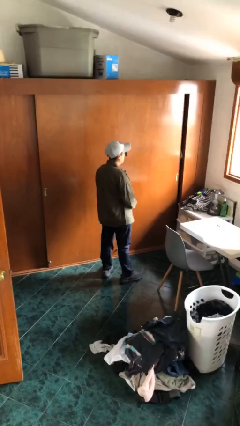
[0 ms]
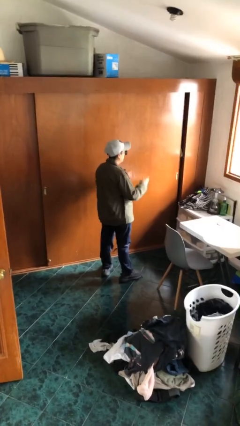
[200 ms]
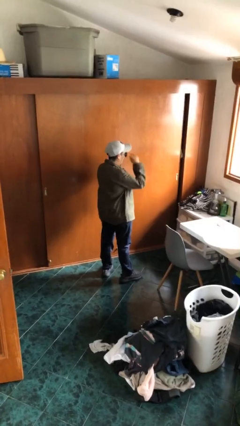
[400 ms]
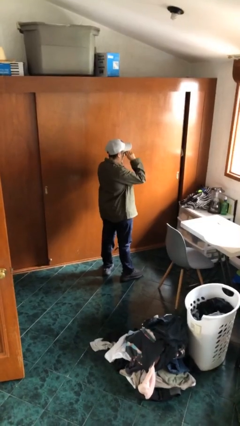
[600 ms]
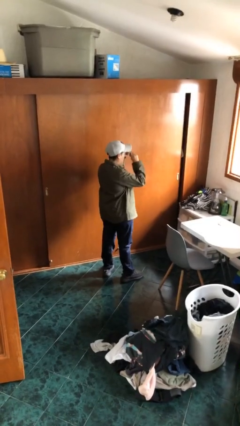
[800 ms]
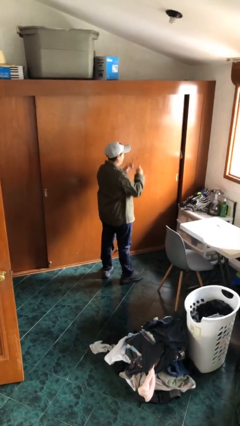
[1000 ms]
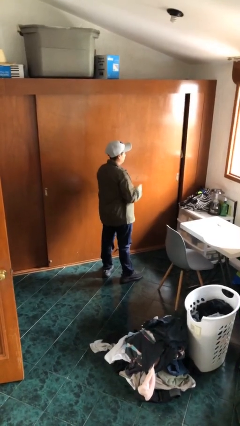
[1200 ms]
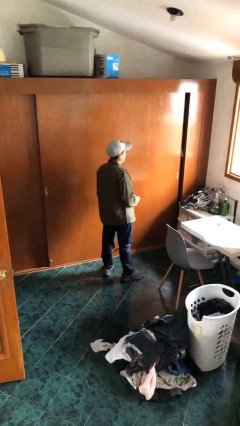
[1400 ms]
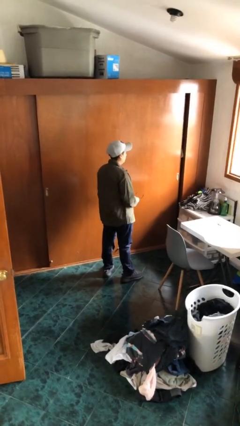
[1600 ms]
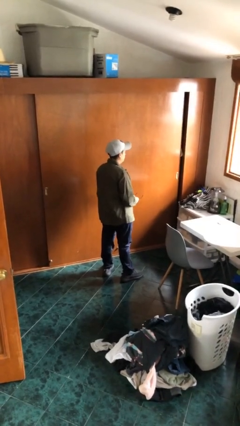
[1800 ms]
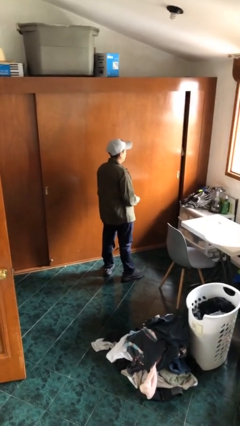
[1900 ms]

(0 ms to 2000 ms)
person takes off sunglasses

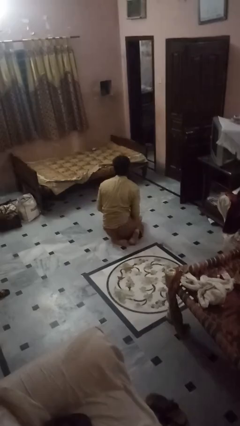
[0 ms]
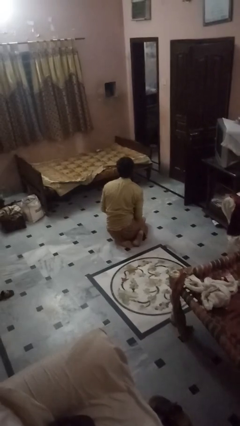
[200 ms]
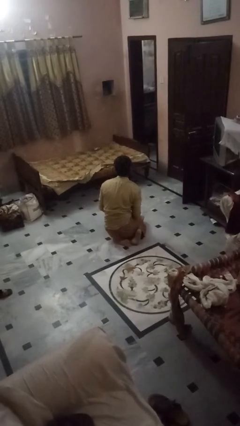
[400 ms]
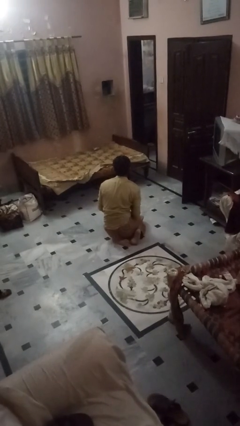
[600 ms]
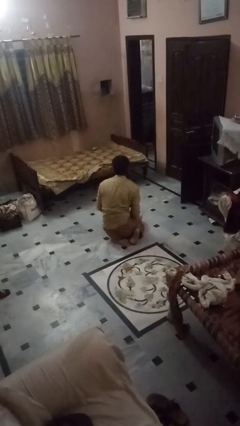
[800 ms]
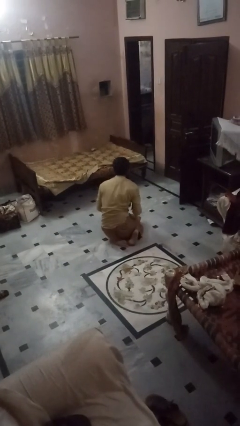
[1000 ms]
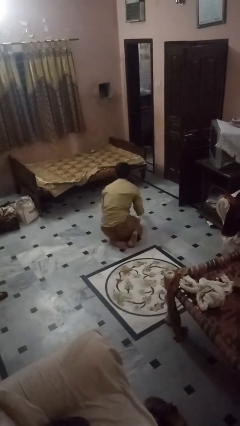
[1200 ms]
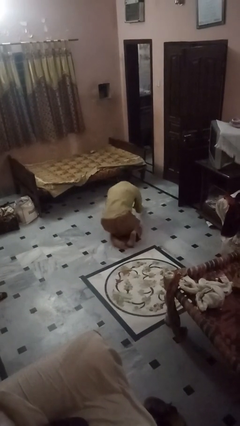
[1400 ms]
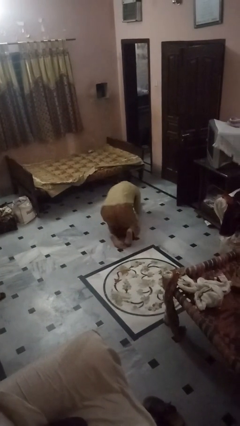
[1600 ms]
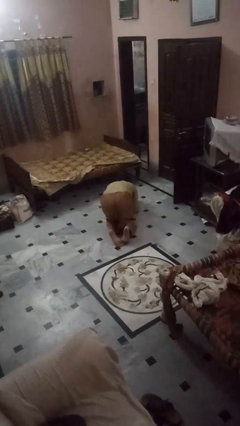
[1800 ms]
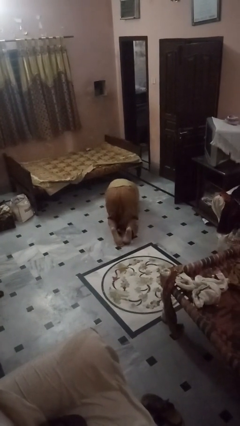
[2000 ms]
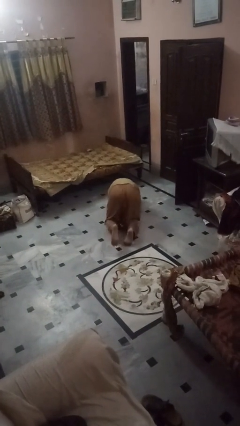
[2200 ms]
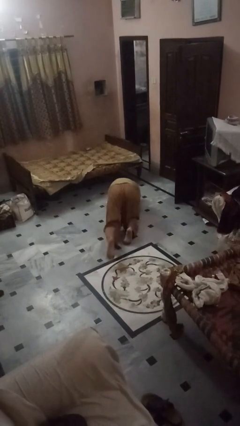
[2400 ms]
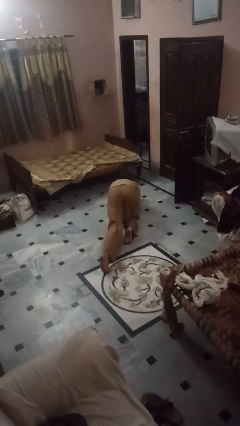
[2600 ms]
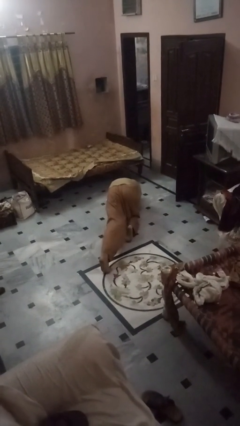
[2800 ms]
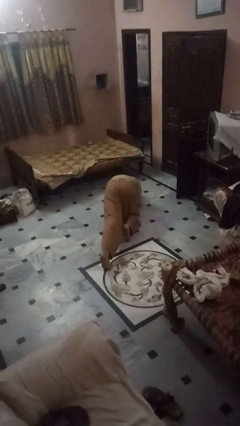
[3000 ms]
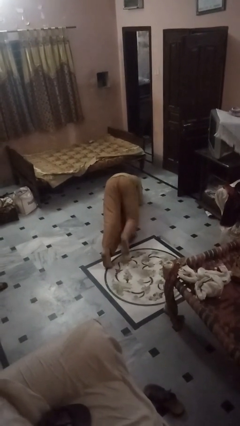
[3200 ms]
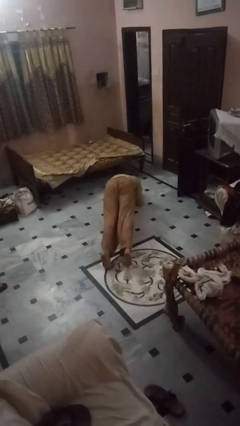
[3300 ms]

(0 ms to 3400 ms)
person exercises with plank

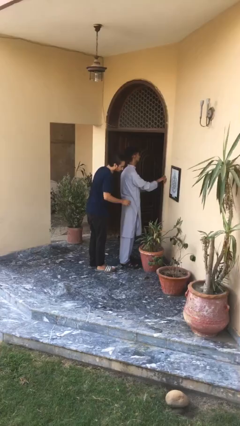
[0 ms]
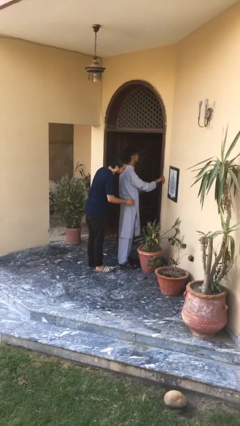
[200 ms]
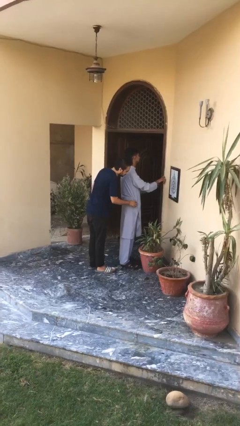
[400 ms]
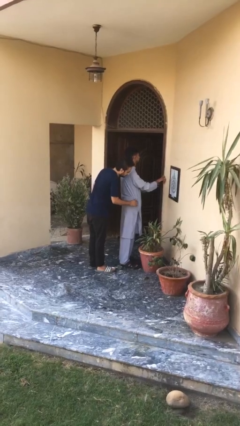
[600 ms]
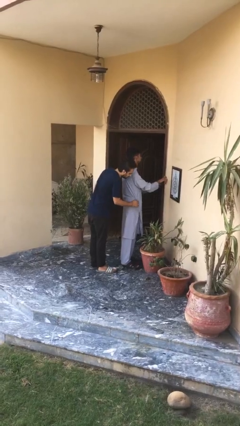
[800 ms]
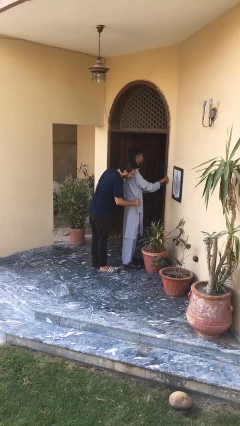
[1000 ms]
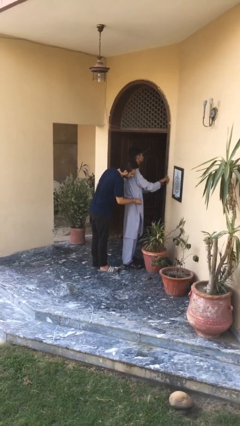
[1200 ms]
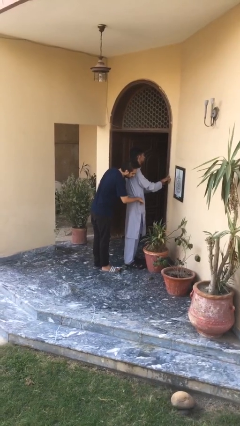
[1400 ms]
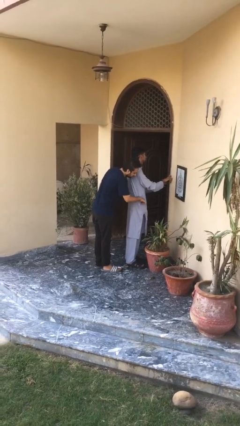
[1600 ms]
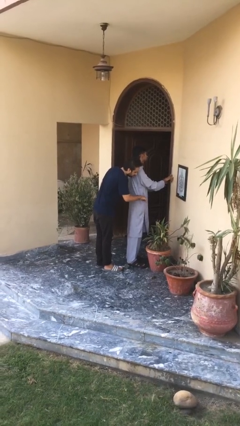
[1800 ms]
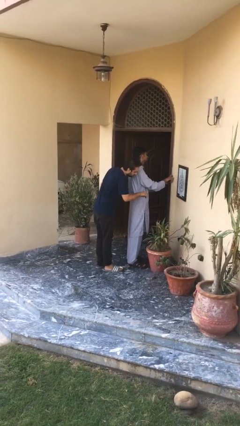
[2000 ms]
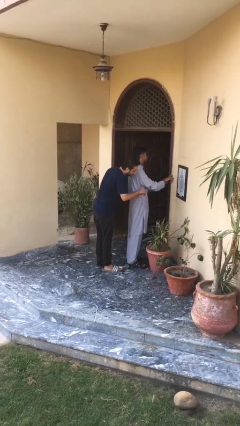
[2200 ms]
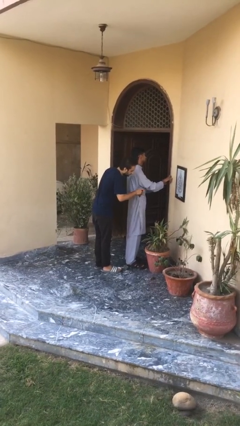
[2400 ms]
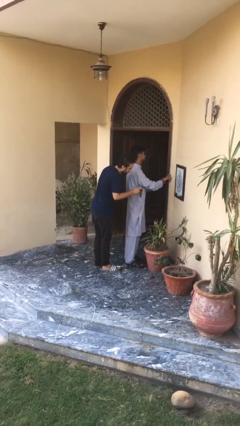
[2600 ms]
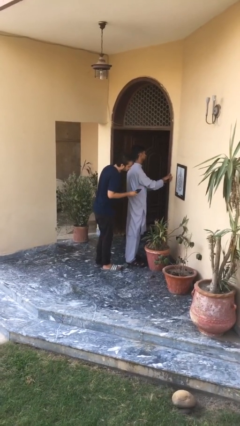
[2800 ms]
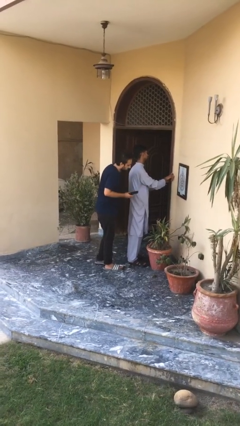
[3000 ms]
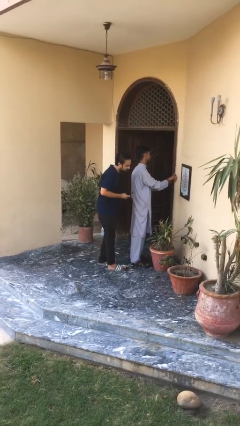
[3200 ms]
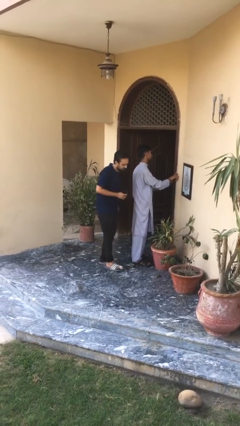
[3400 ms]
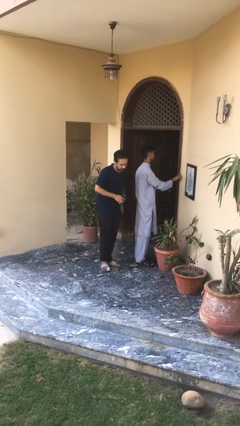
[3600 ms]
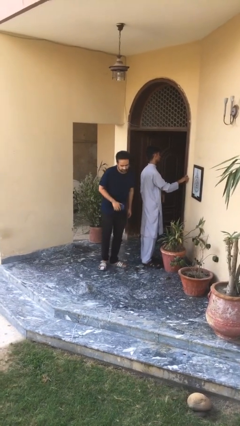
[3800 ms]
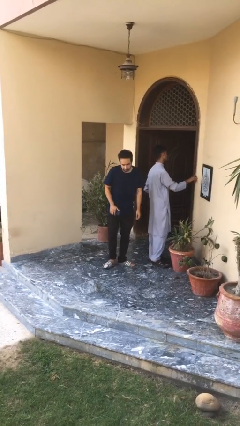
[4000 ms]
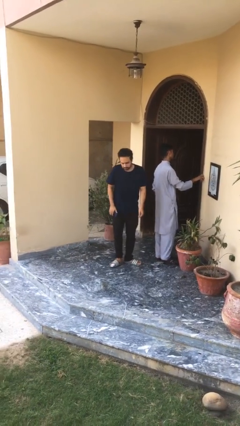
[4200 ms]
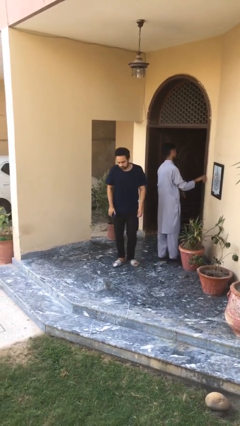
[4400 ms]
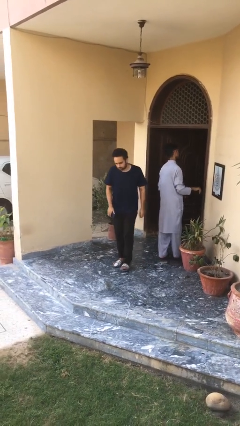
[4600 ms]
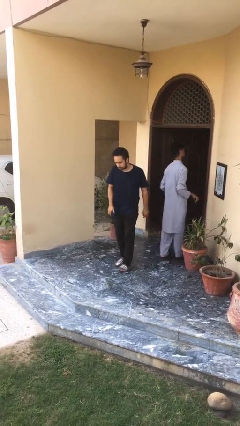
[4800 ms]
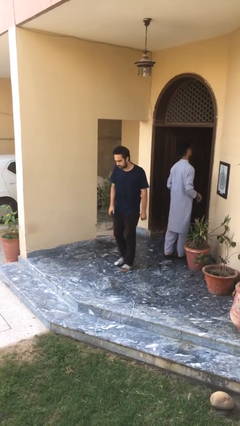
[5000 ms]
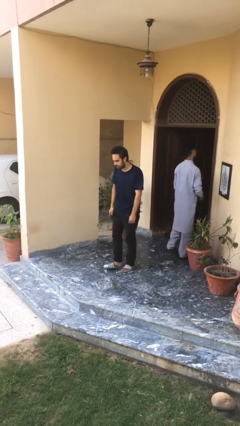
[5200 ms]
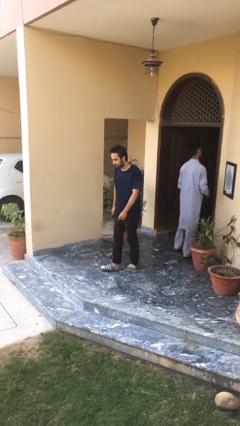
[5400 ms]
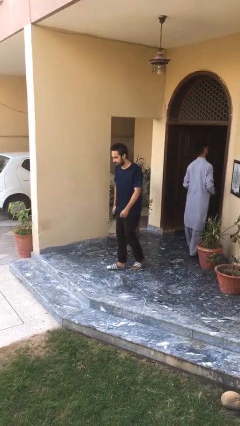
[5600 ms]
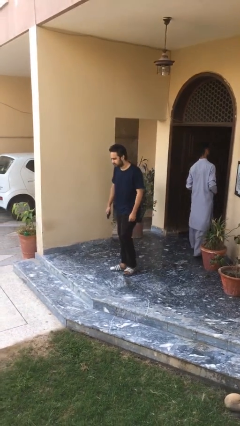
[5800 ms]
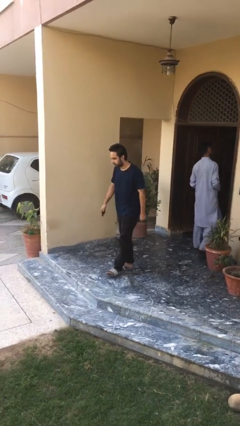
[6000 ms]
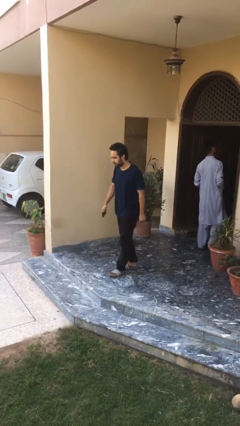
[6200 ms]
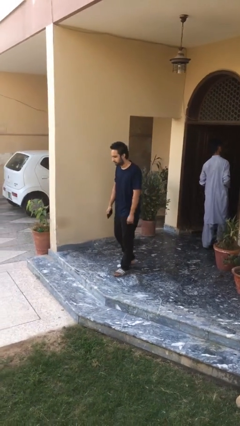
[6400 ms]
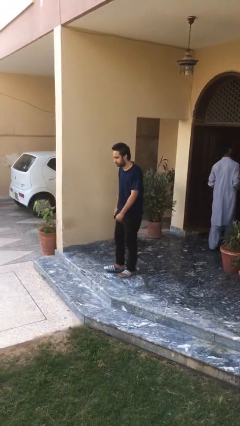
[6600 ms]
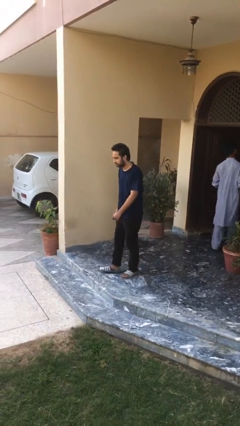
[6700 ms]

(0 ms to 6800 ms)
person steals object from person

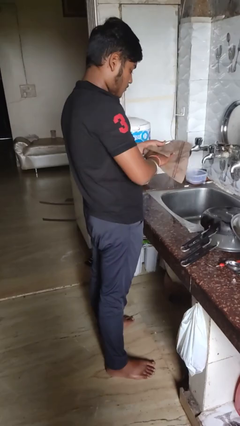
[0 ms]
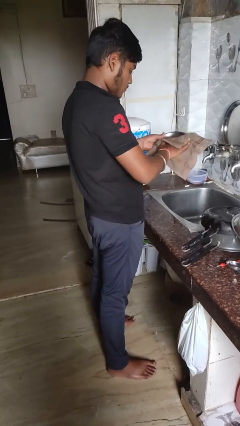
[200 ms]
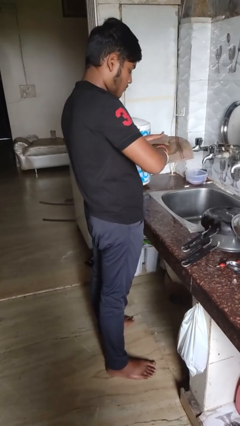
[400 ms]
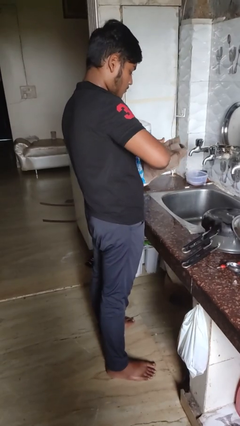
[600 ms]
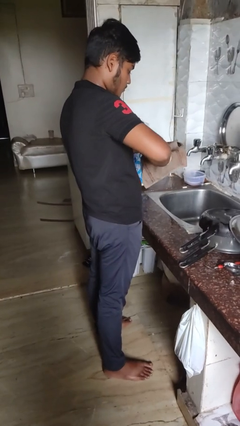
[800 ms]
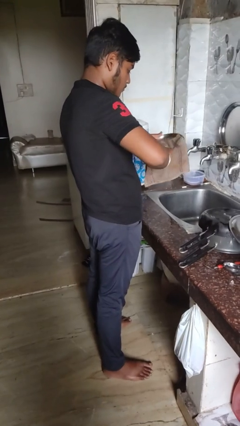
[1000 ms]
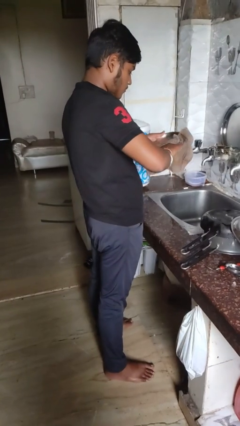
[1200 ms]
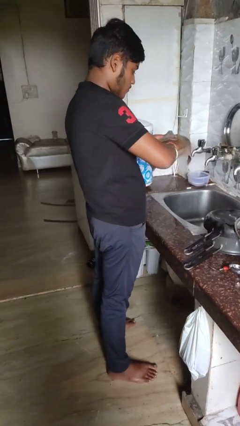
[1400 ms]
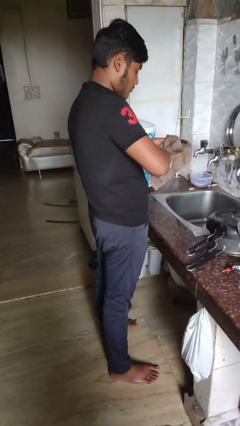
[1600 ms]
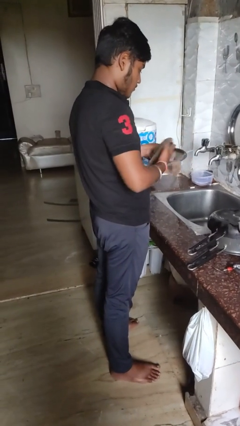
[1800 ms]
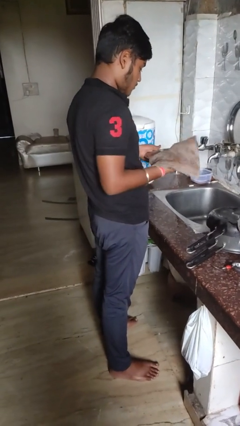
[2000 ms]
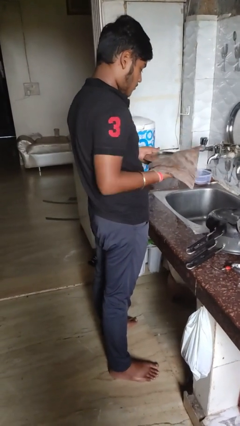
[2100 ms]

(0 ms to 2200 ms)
person dries dish

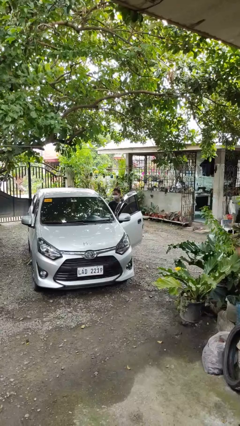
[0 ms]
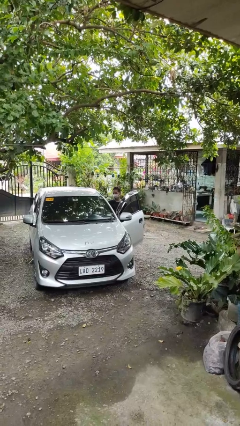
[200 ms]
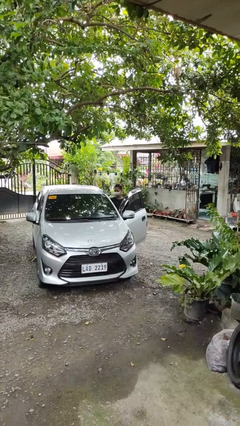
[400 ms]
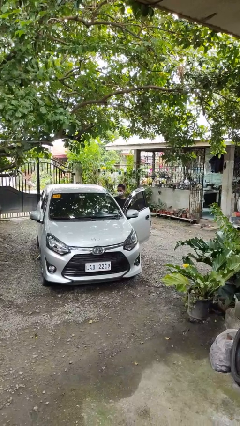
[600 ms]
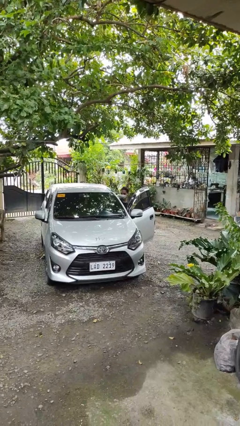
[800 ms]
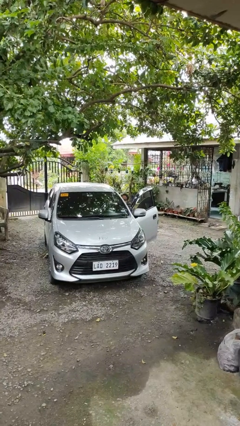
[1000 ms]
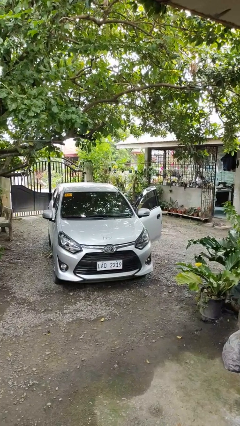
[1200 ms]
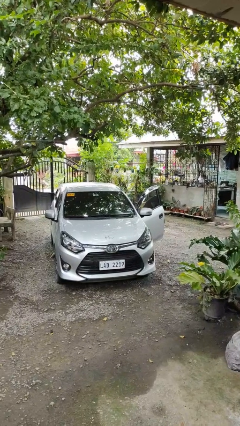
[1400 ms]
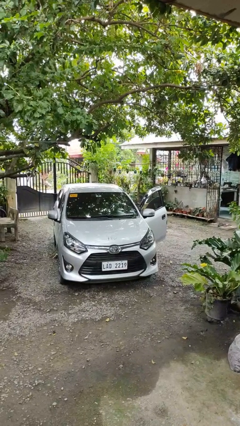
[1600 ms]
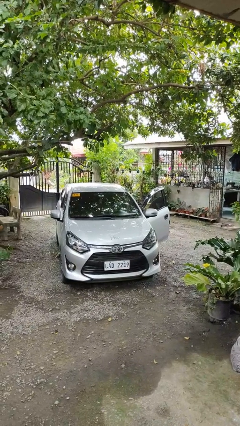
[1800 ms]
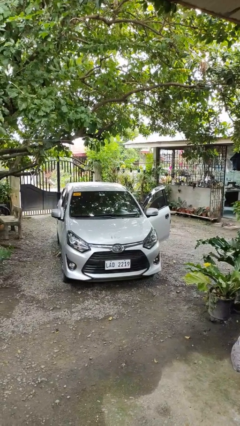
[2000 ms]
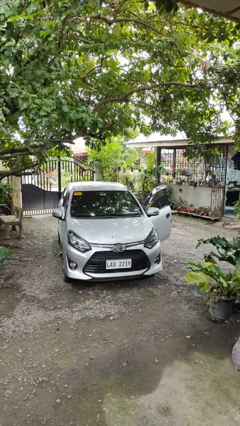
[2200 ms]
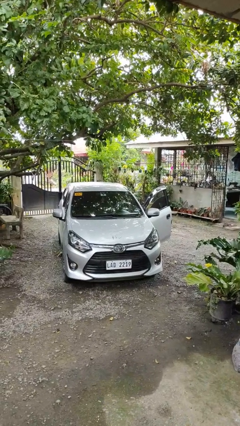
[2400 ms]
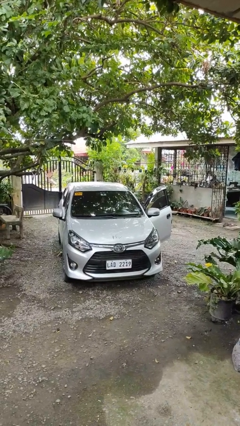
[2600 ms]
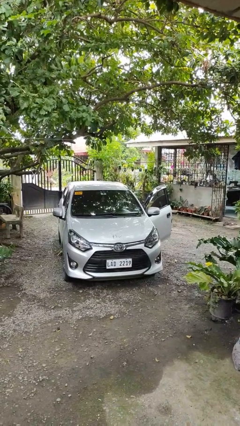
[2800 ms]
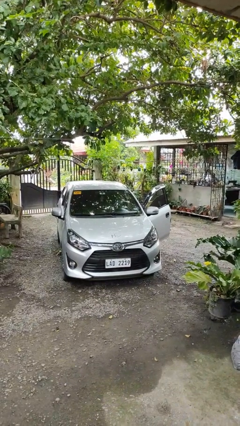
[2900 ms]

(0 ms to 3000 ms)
person enters car
